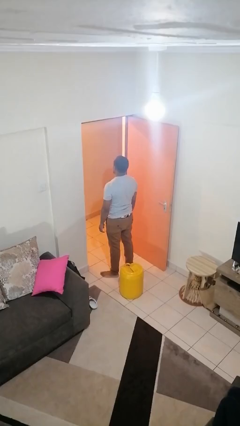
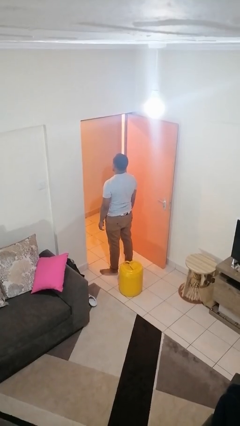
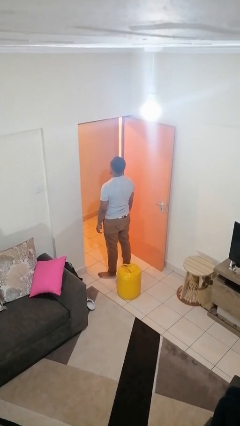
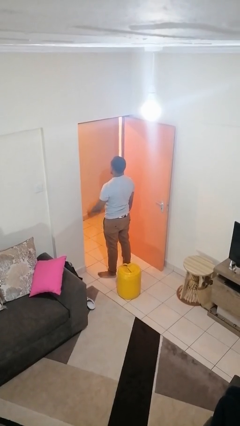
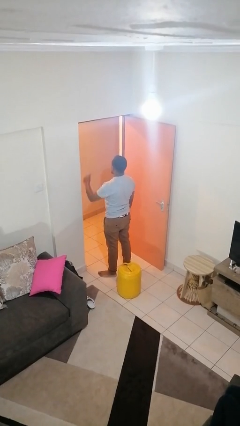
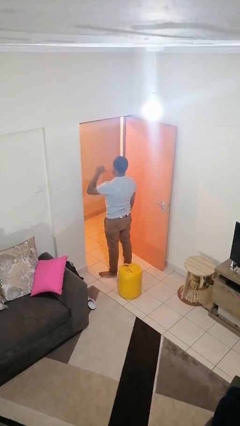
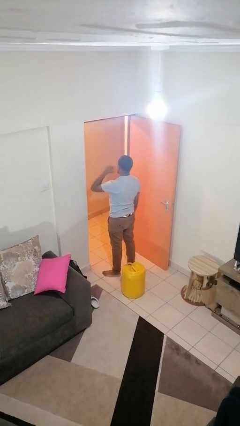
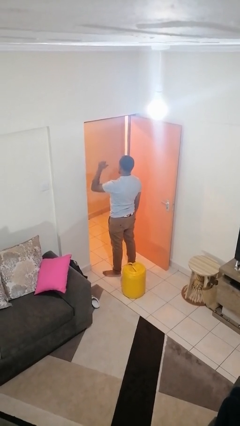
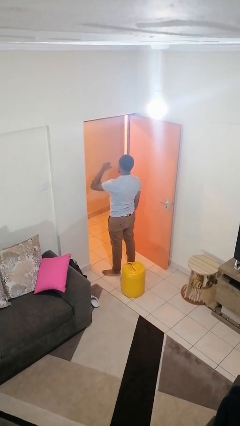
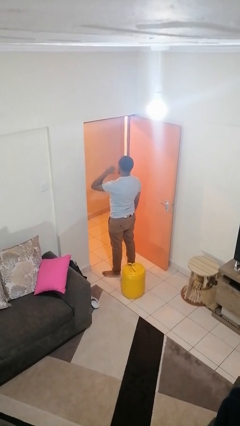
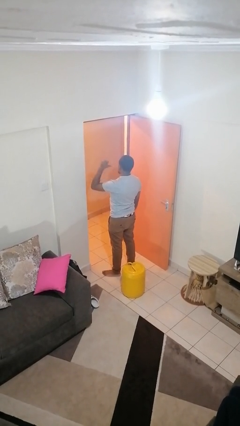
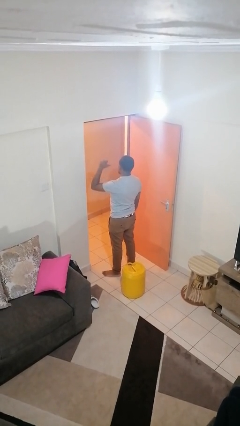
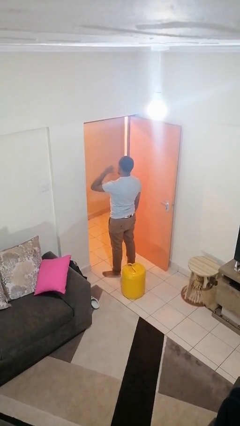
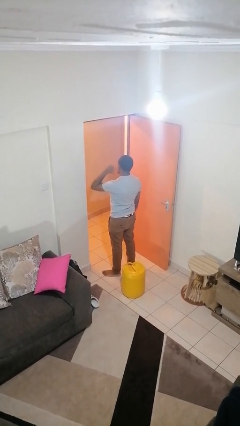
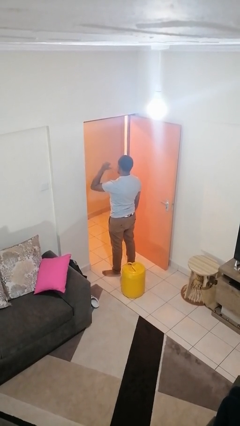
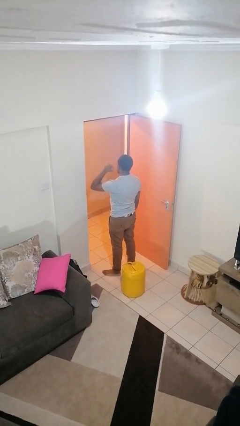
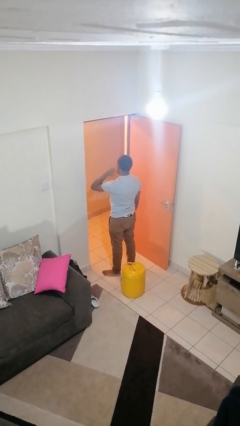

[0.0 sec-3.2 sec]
person gestures behind me

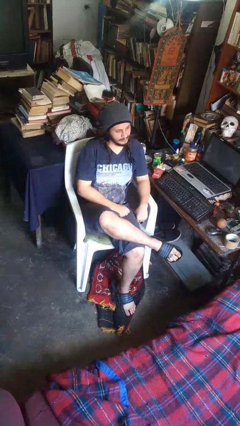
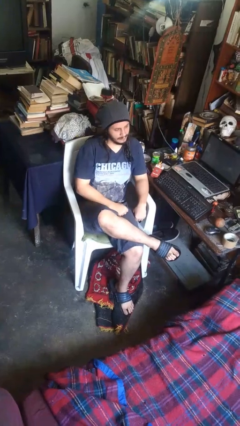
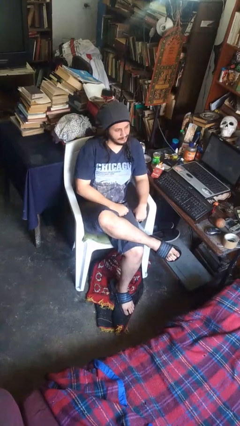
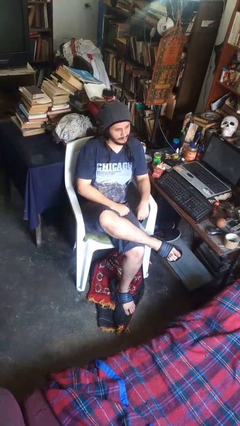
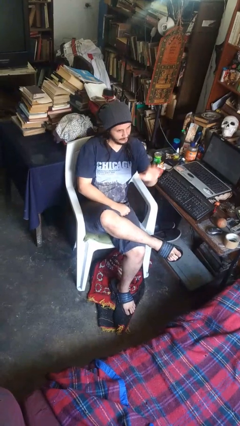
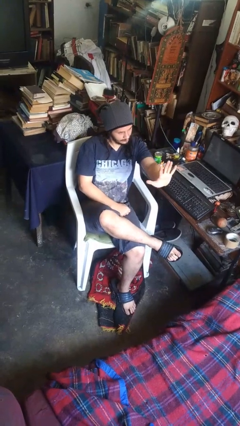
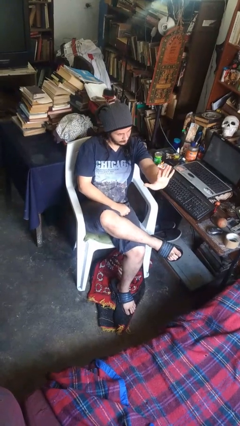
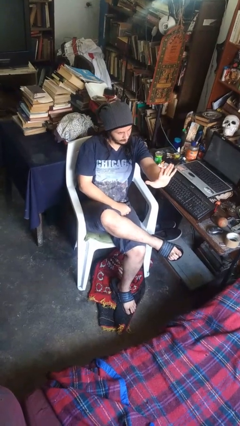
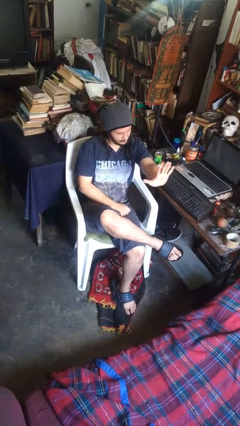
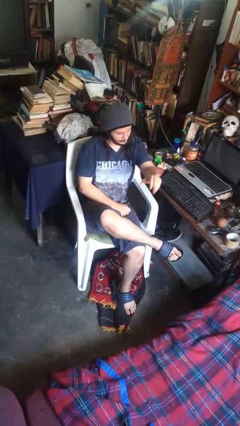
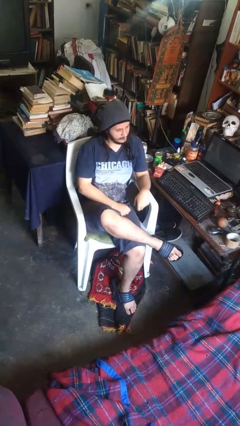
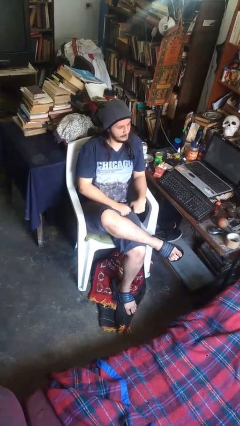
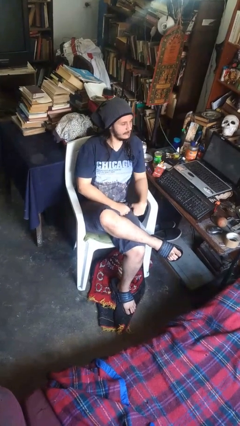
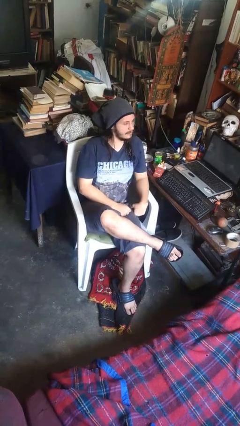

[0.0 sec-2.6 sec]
person gestures number five

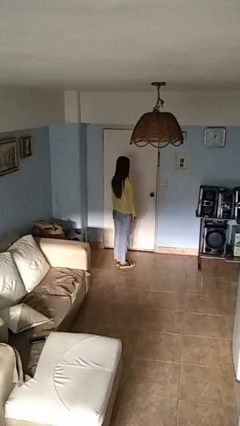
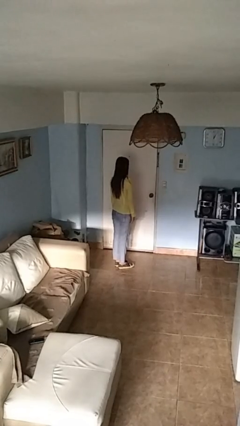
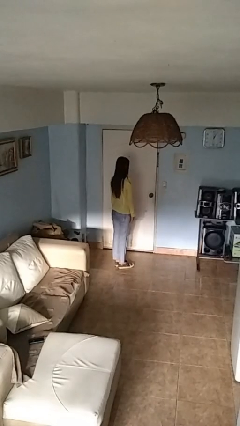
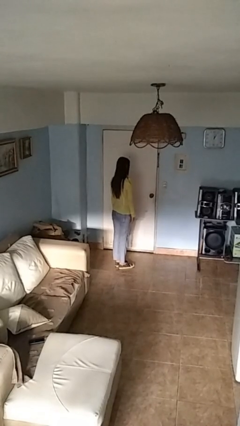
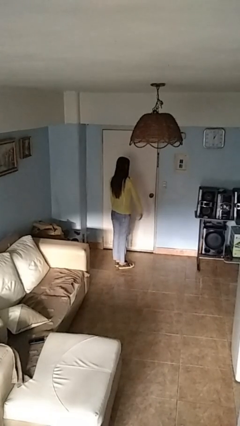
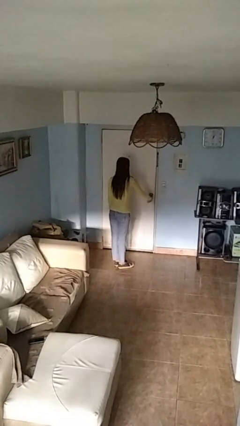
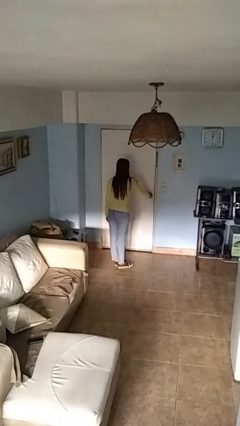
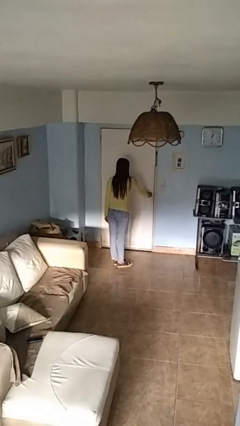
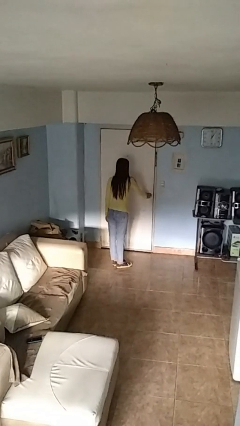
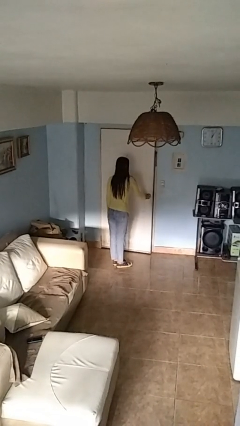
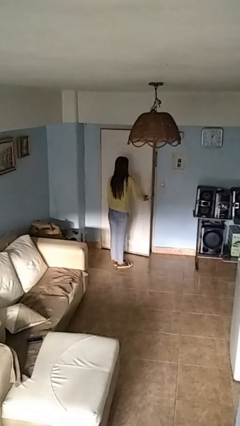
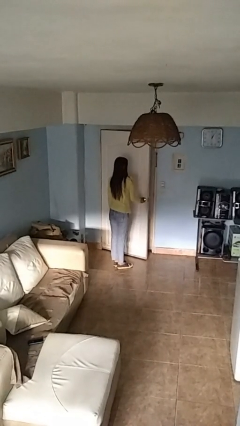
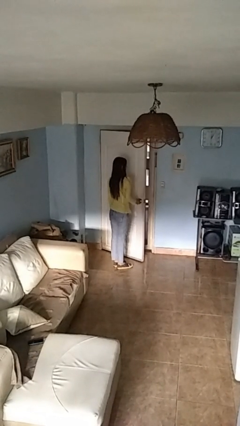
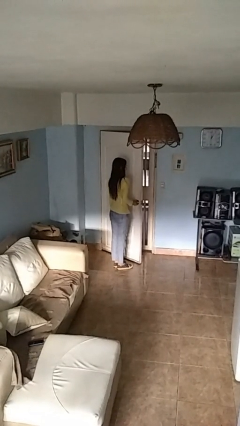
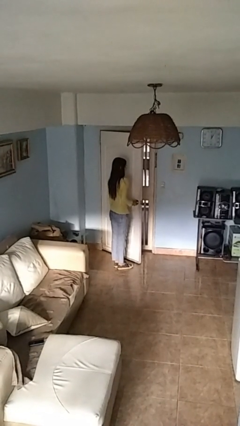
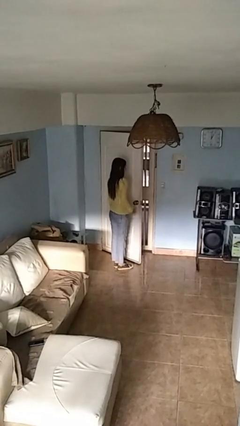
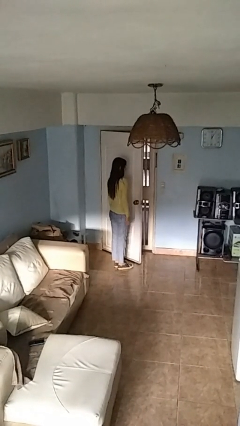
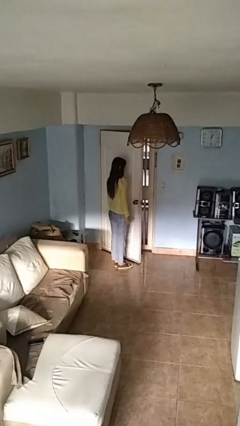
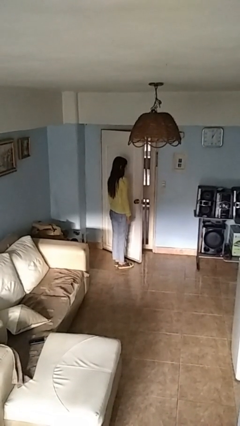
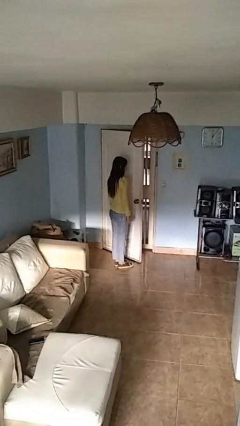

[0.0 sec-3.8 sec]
person opens facility door

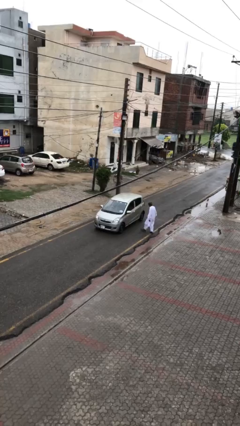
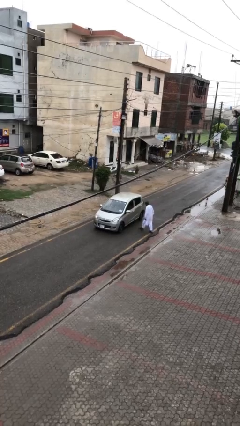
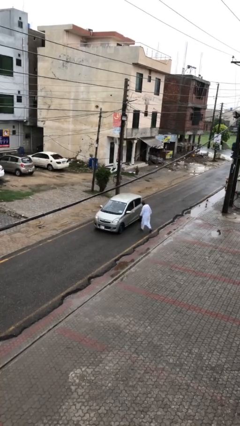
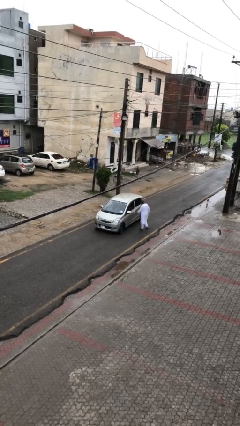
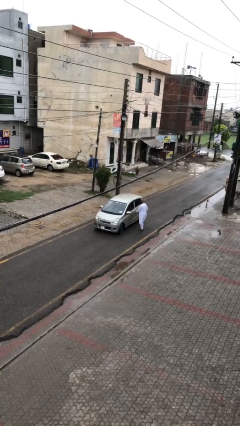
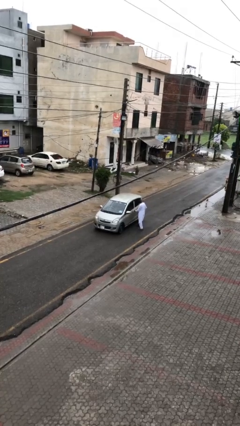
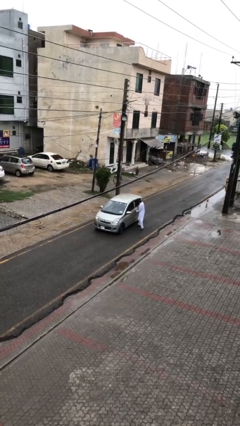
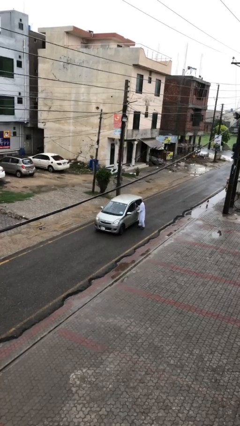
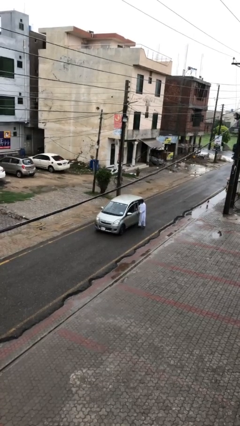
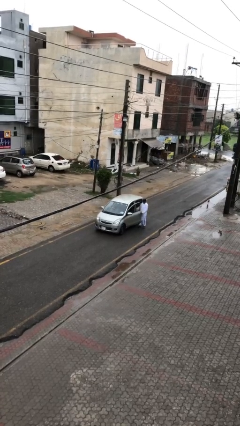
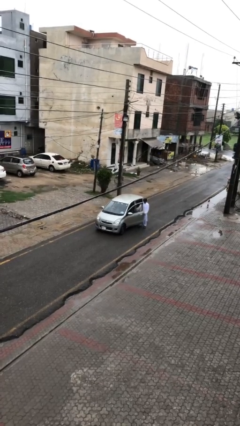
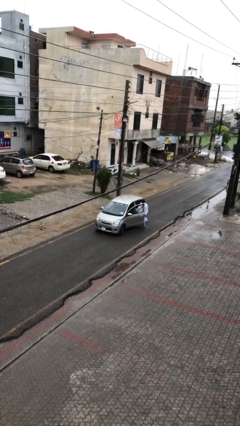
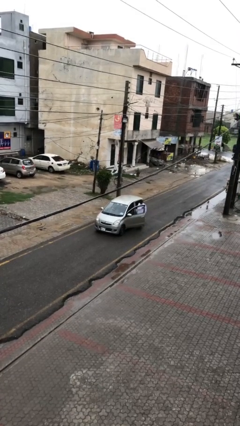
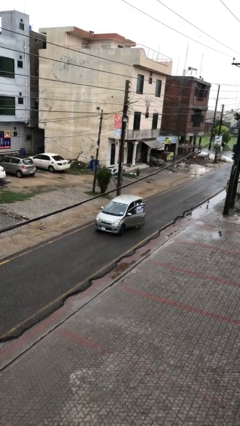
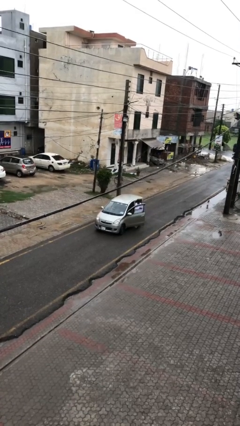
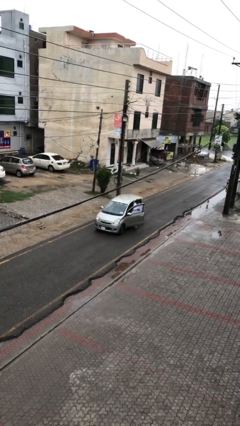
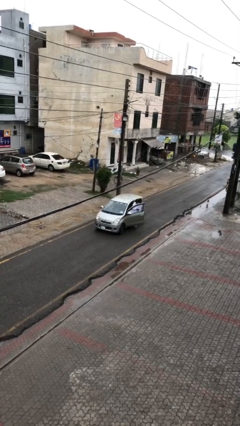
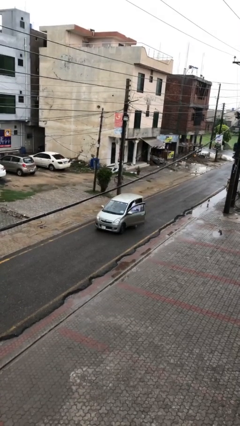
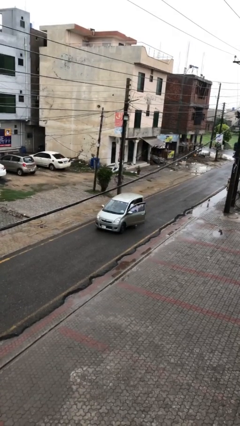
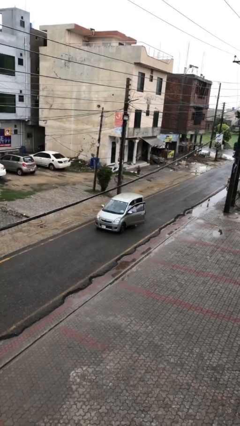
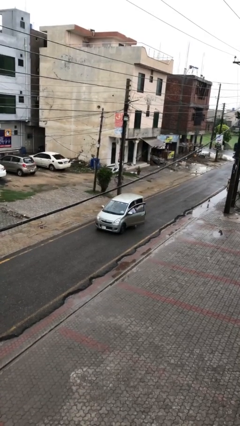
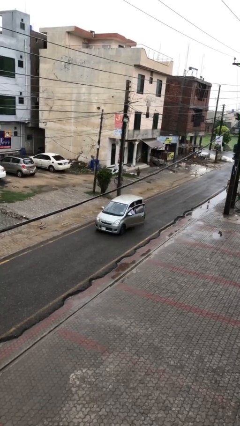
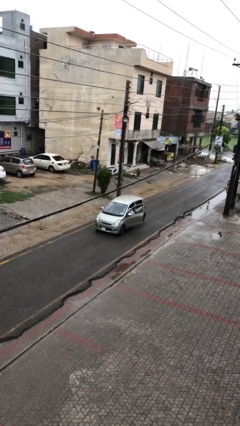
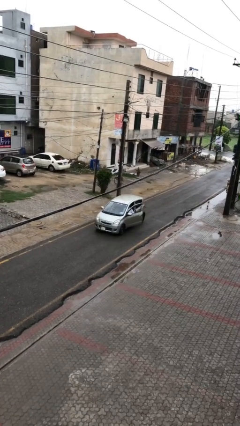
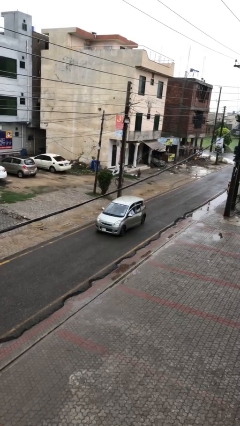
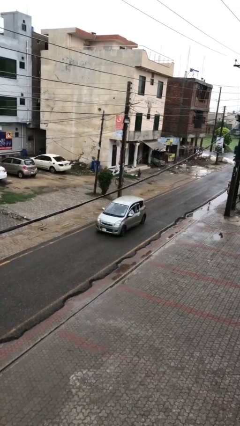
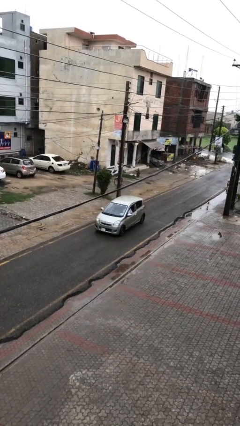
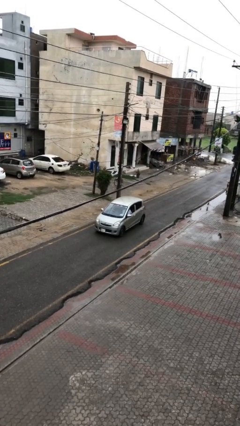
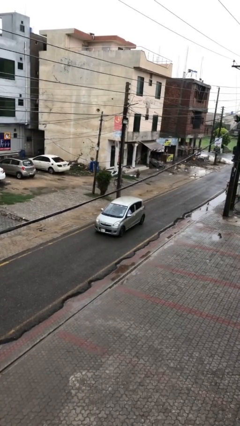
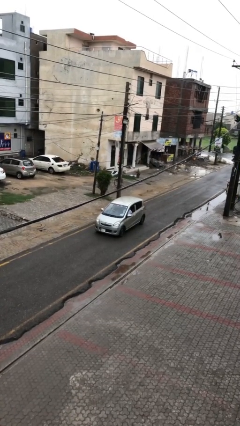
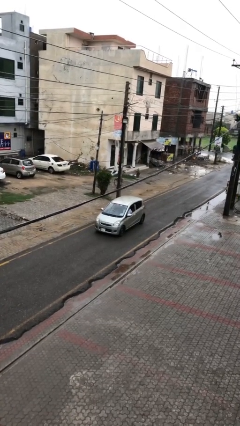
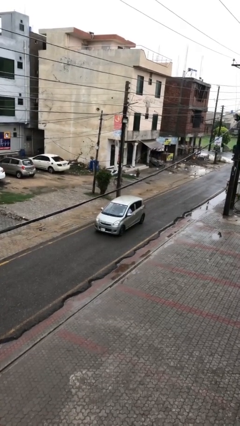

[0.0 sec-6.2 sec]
car picks up person

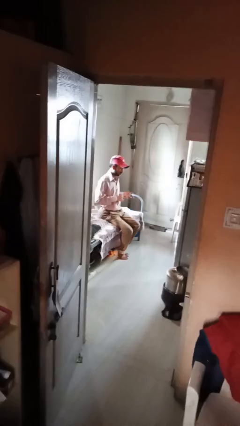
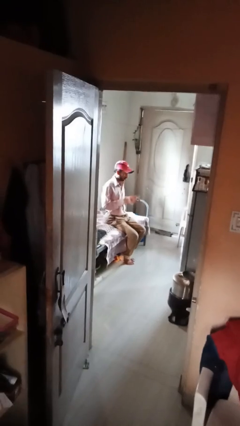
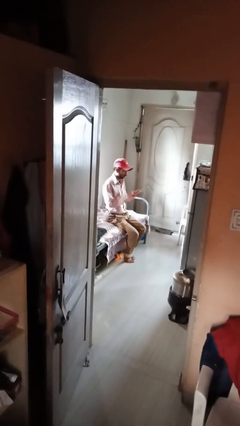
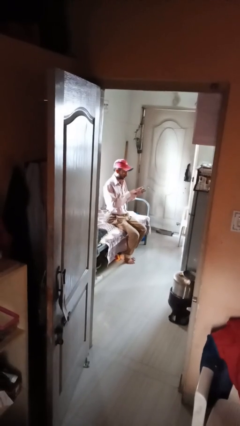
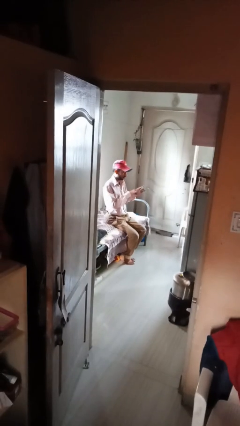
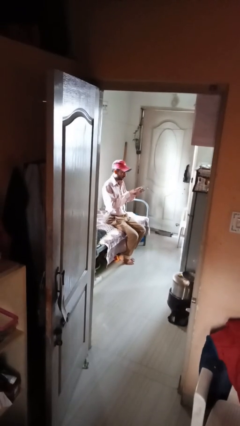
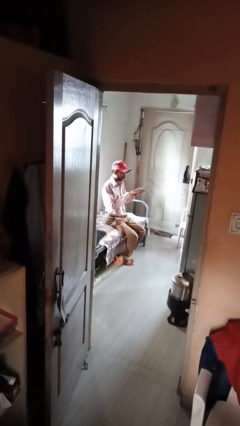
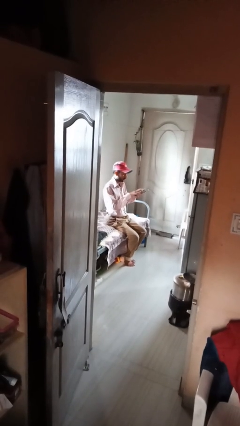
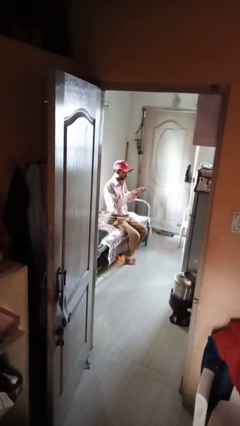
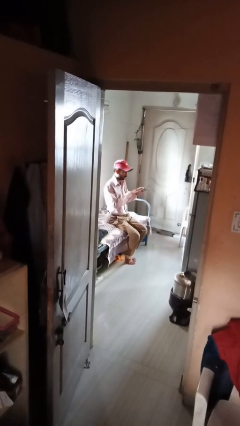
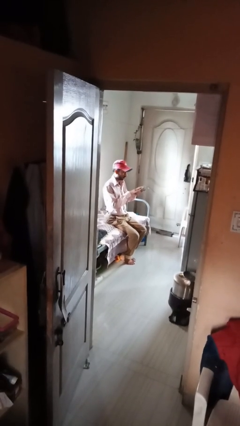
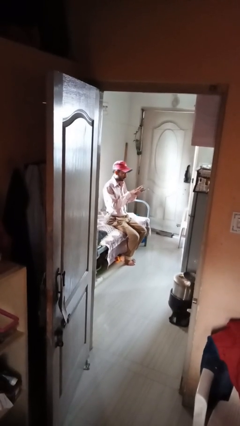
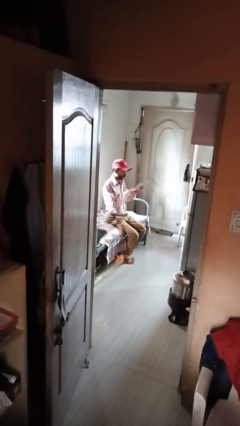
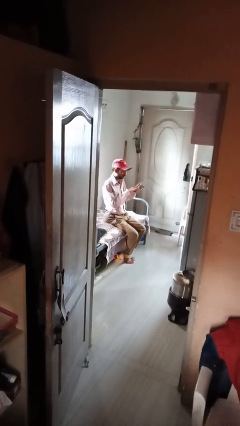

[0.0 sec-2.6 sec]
person clips fingernails
